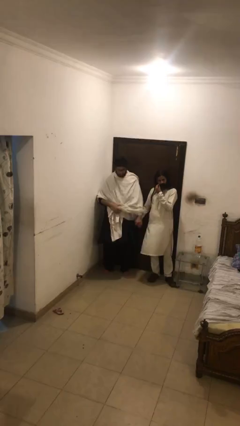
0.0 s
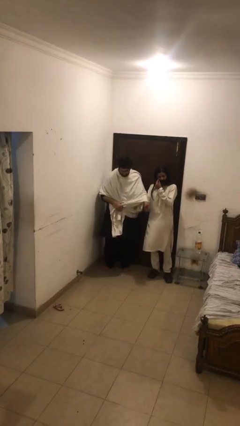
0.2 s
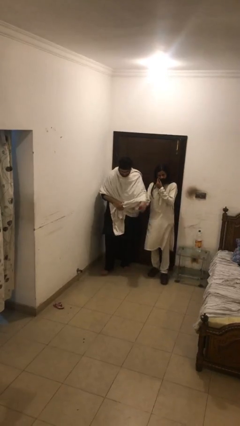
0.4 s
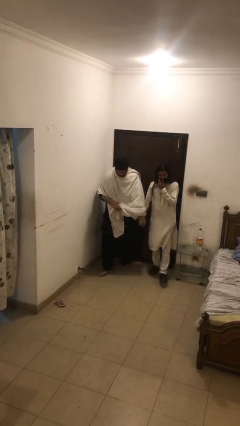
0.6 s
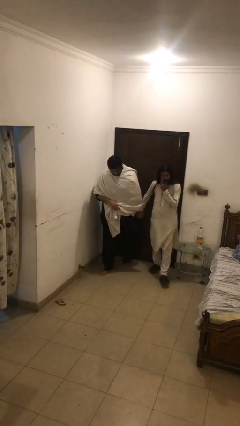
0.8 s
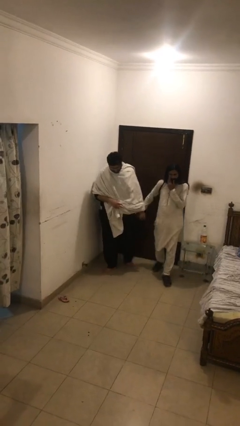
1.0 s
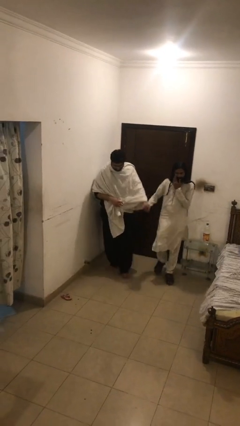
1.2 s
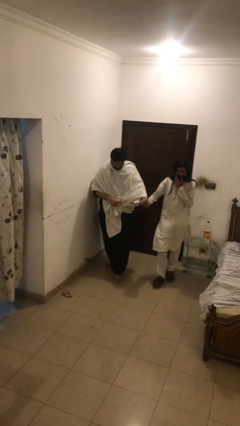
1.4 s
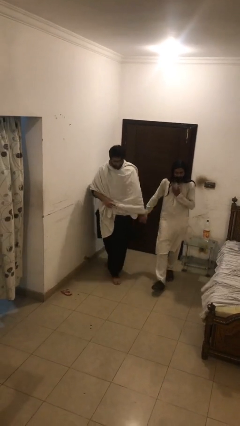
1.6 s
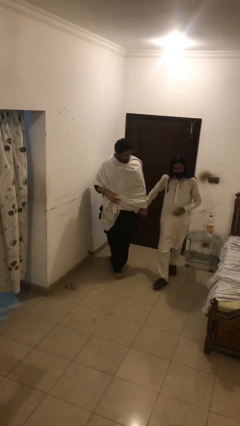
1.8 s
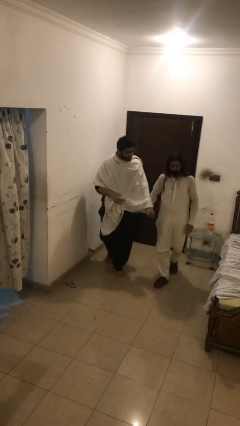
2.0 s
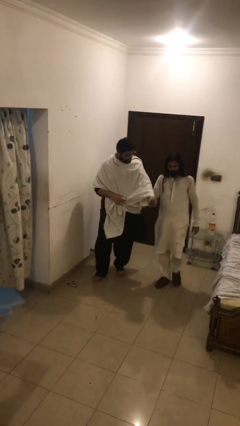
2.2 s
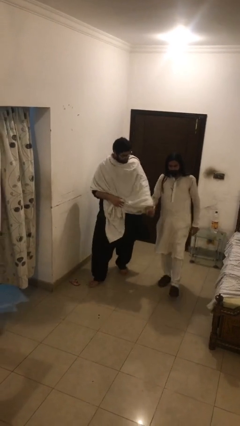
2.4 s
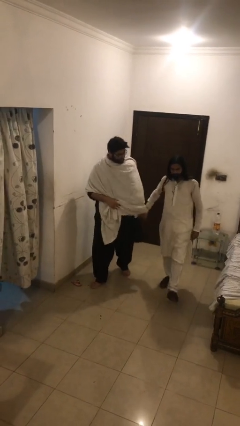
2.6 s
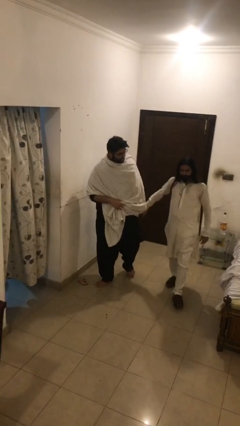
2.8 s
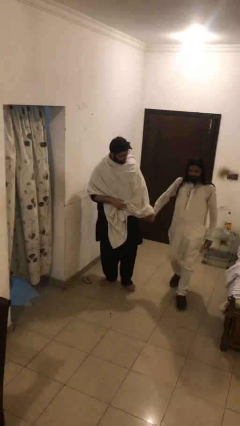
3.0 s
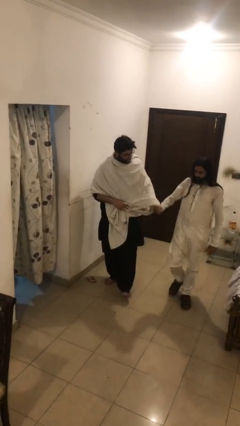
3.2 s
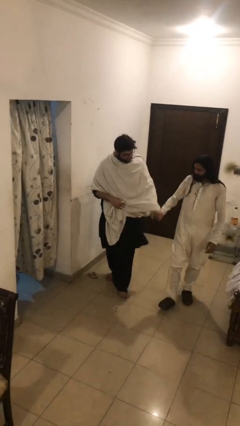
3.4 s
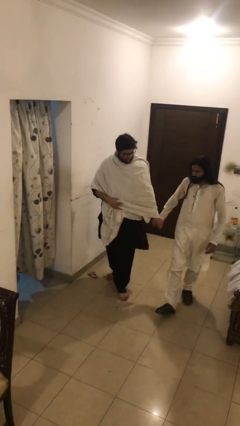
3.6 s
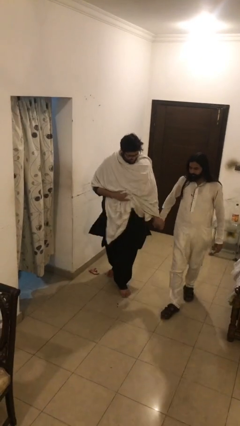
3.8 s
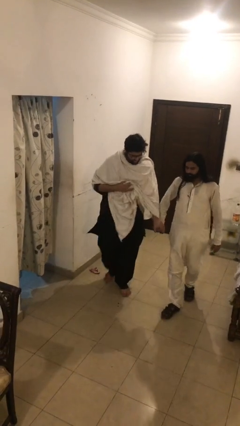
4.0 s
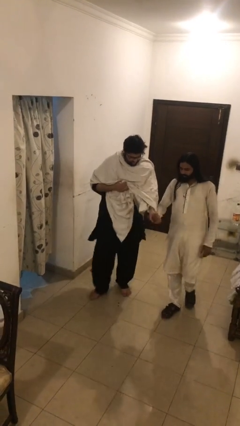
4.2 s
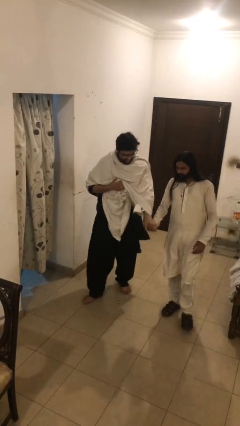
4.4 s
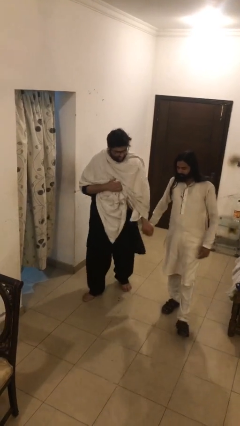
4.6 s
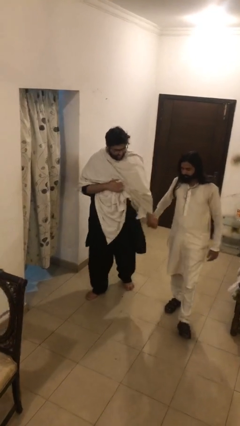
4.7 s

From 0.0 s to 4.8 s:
person holds hand

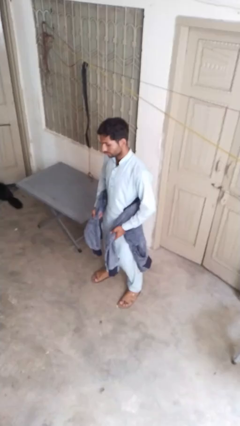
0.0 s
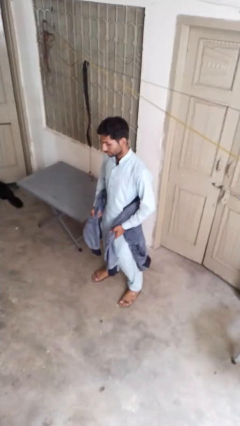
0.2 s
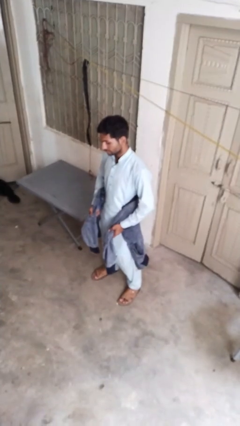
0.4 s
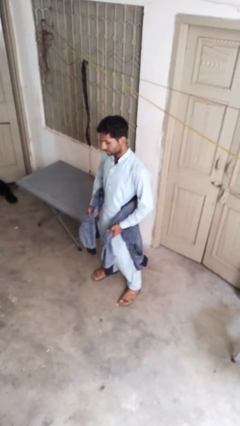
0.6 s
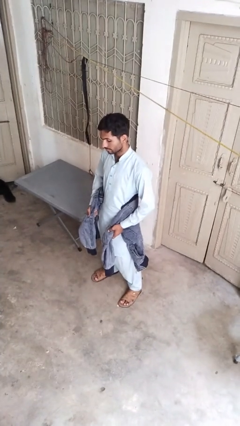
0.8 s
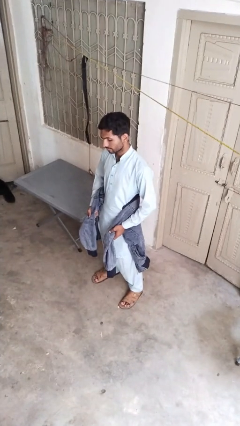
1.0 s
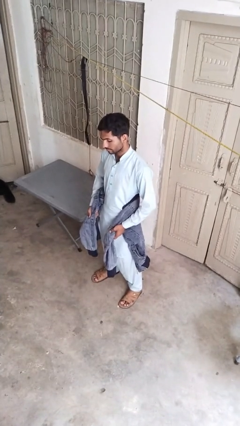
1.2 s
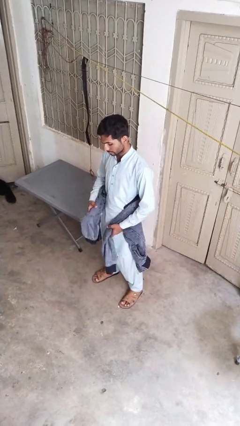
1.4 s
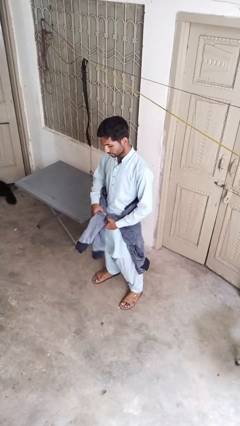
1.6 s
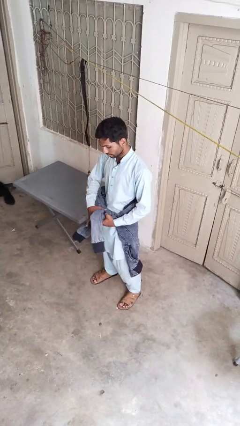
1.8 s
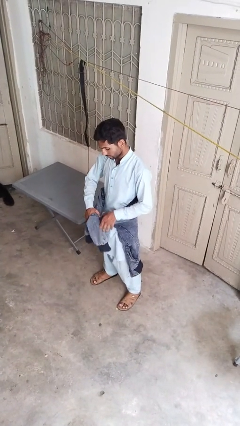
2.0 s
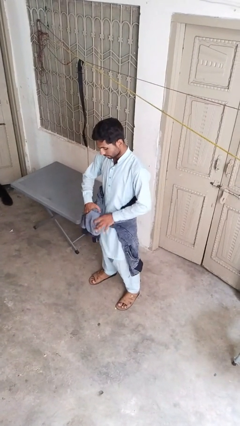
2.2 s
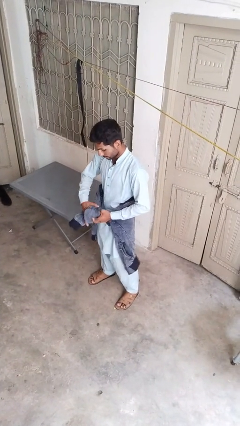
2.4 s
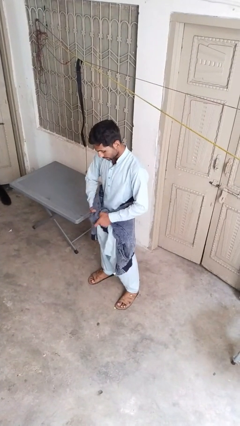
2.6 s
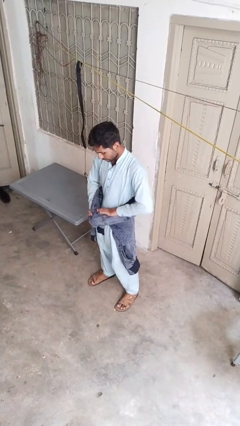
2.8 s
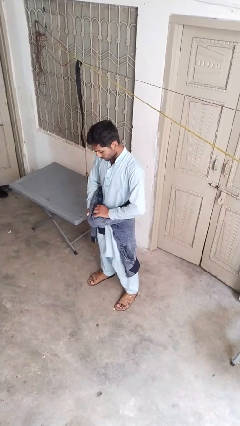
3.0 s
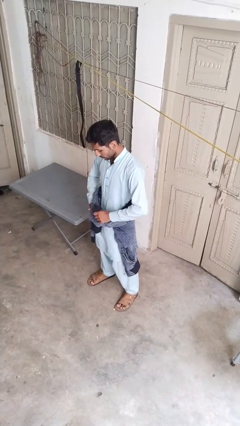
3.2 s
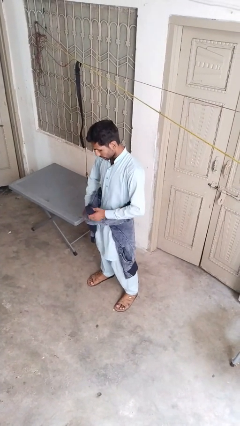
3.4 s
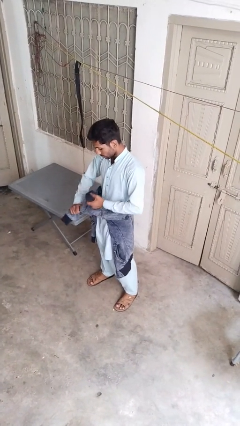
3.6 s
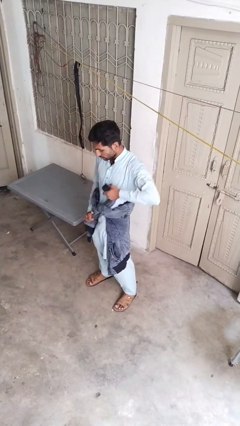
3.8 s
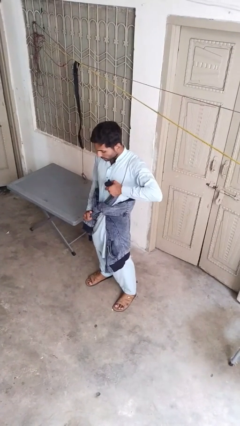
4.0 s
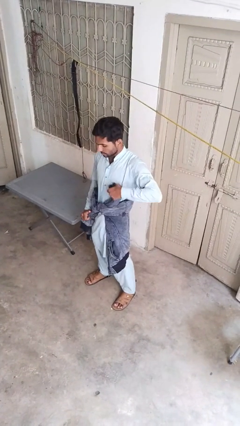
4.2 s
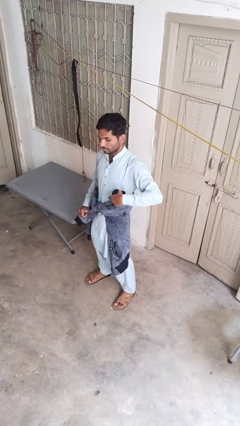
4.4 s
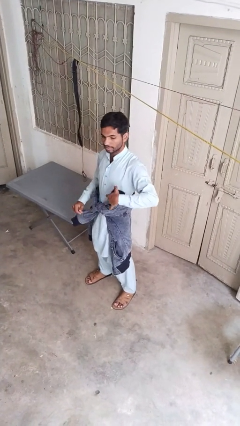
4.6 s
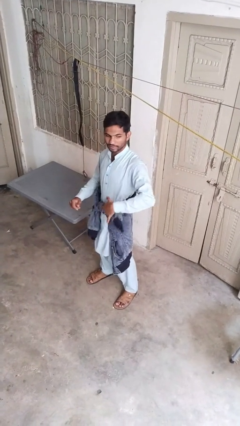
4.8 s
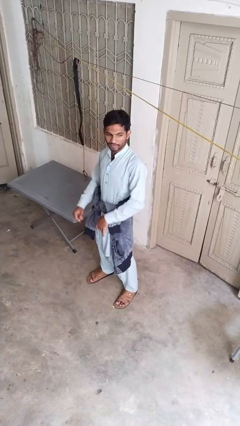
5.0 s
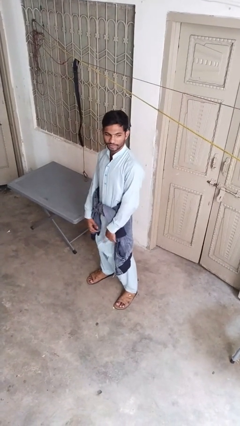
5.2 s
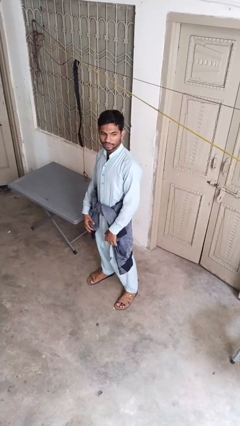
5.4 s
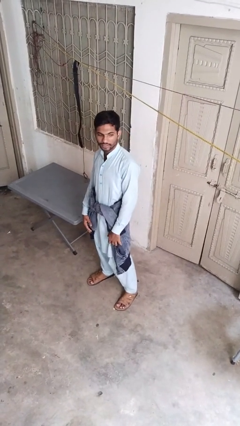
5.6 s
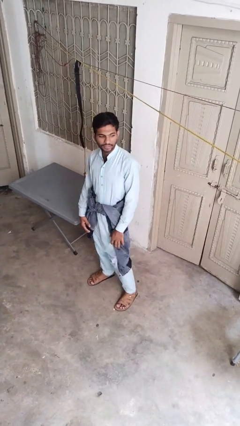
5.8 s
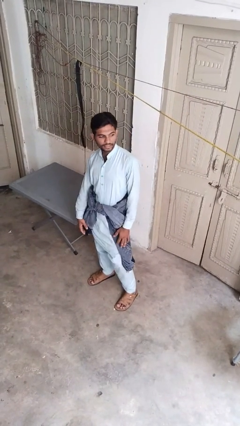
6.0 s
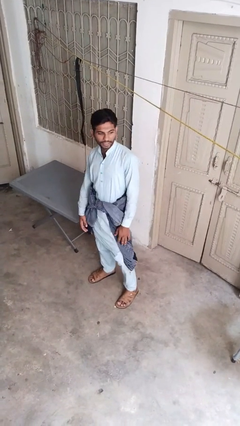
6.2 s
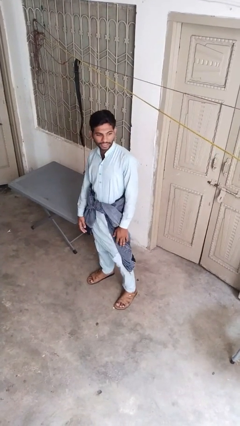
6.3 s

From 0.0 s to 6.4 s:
person ties jacket around waist

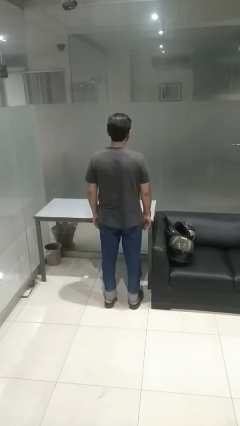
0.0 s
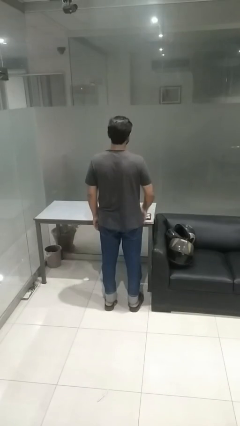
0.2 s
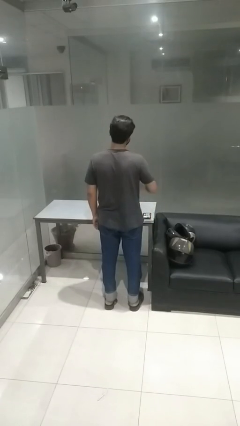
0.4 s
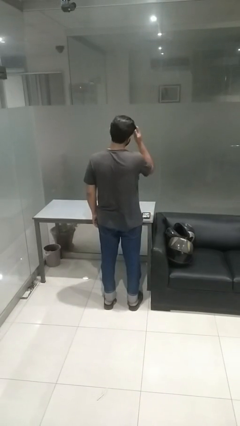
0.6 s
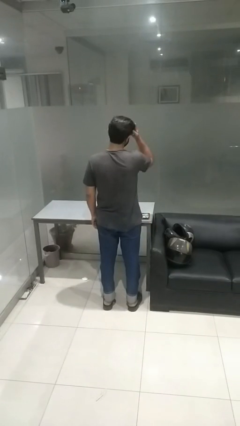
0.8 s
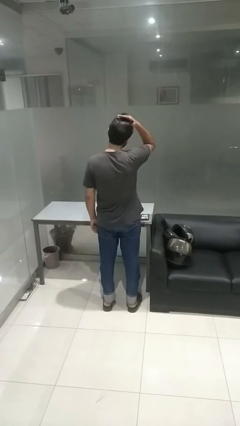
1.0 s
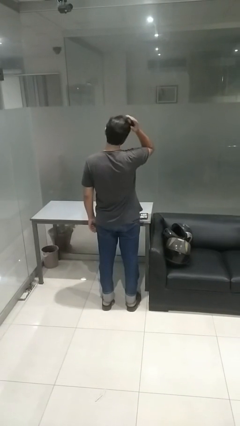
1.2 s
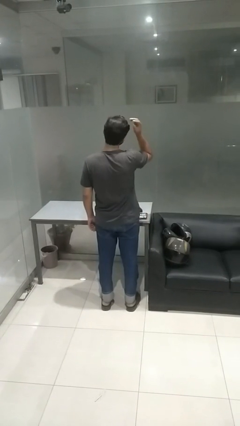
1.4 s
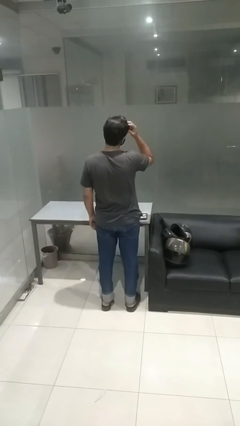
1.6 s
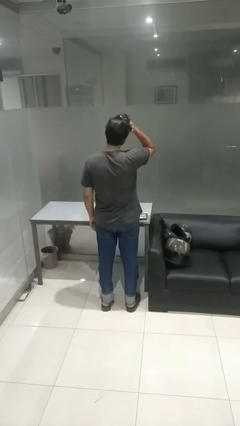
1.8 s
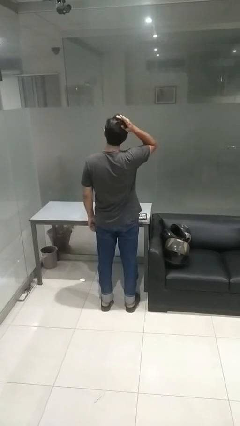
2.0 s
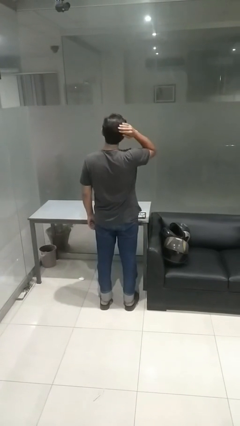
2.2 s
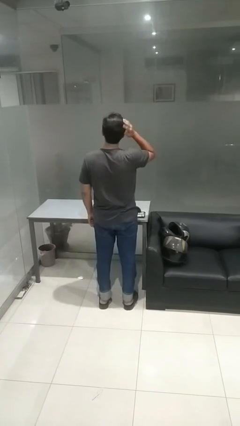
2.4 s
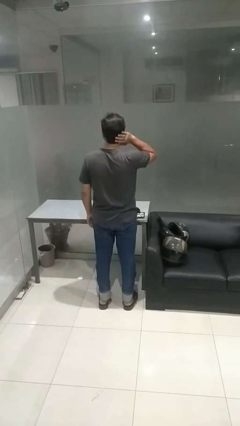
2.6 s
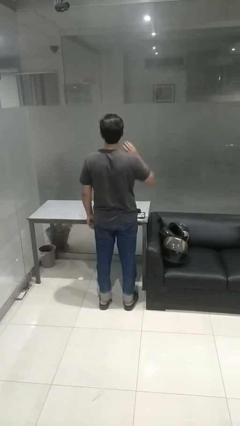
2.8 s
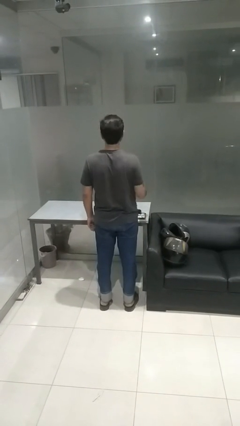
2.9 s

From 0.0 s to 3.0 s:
person strokes hair

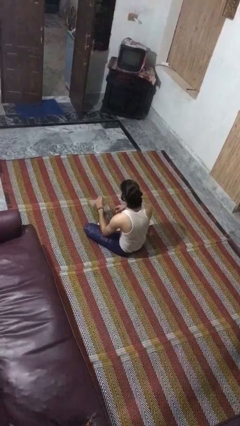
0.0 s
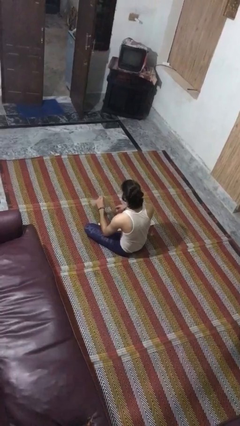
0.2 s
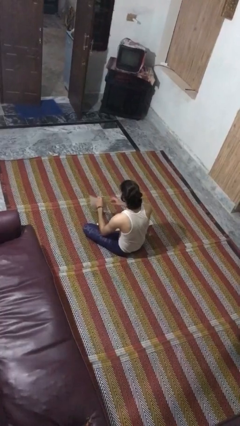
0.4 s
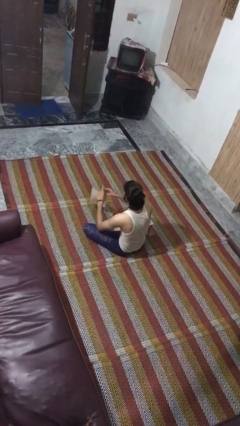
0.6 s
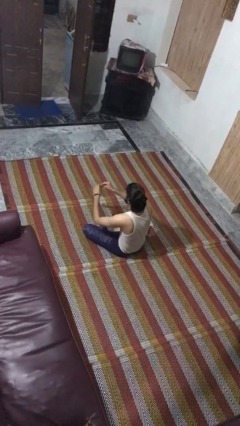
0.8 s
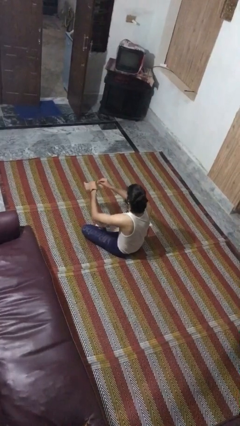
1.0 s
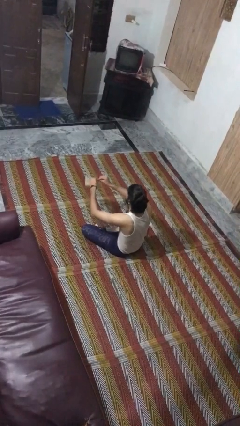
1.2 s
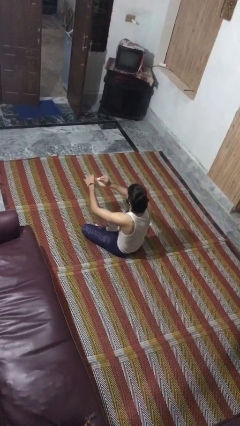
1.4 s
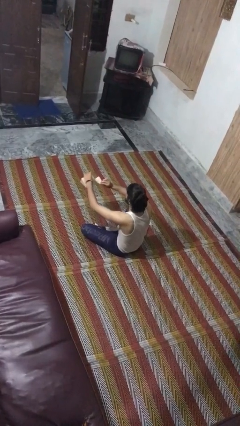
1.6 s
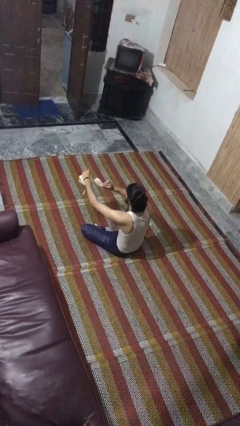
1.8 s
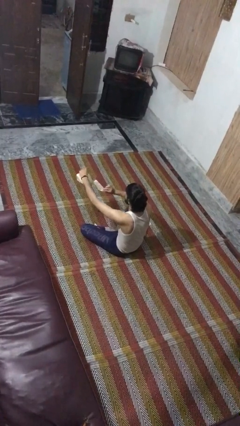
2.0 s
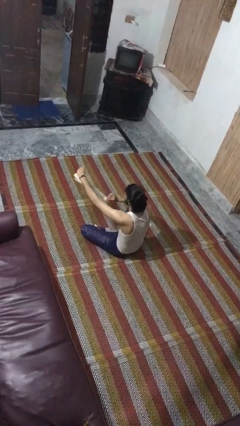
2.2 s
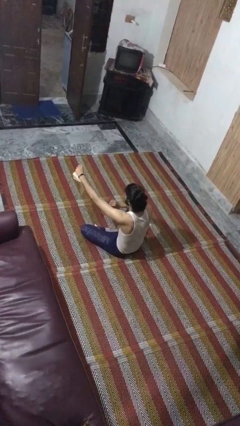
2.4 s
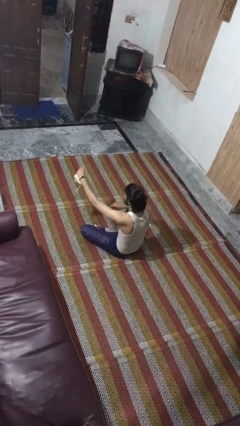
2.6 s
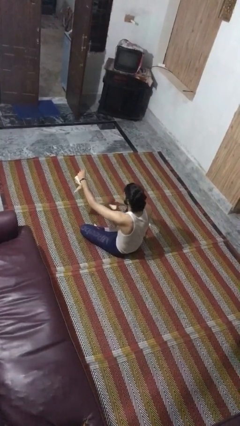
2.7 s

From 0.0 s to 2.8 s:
person tears paper

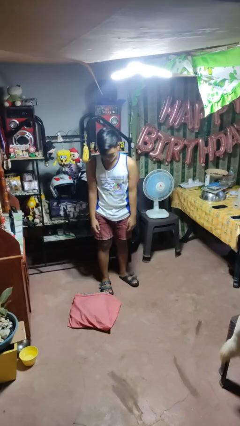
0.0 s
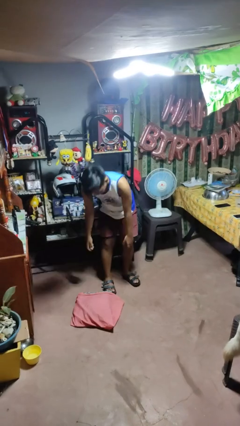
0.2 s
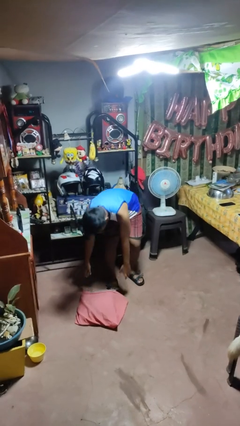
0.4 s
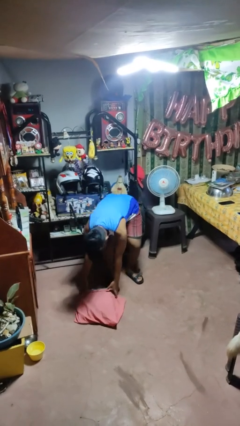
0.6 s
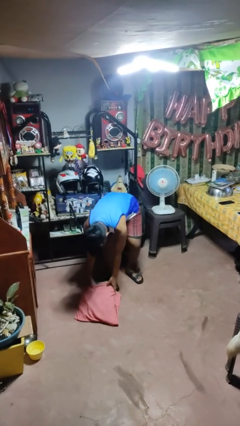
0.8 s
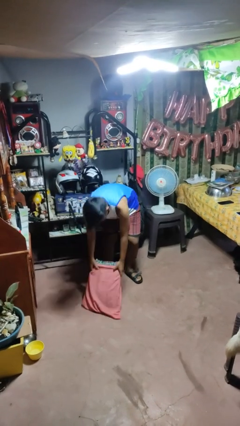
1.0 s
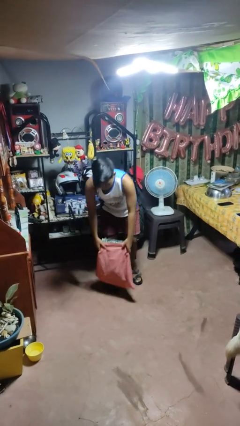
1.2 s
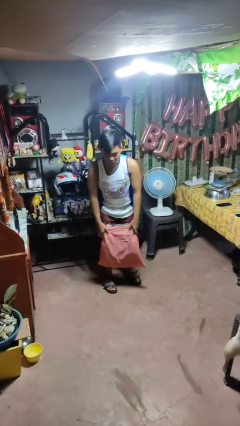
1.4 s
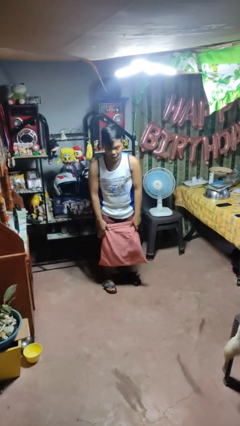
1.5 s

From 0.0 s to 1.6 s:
person picks up object from floor
